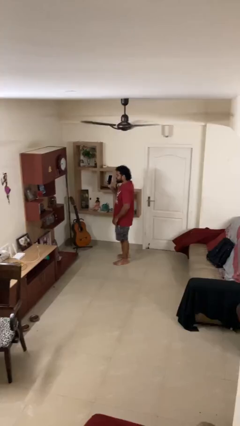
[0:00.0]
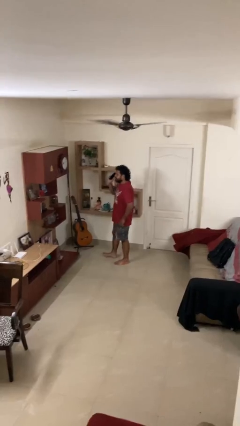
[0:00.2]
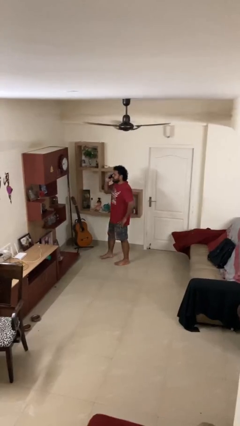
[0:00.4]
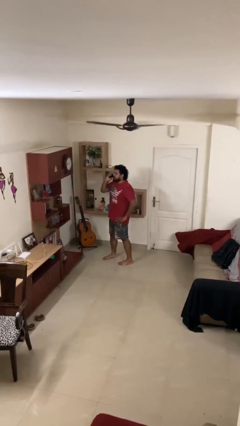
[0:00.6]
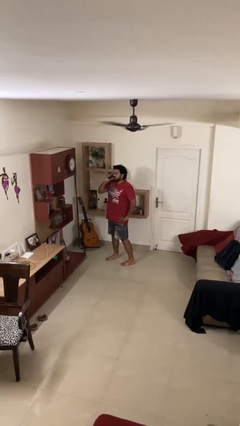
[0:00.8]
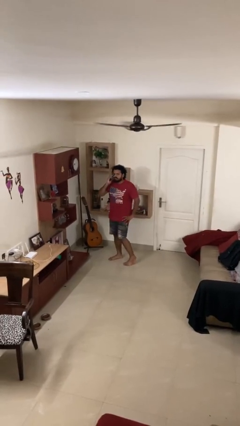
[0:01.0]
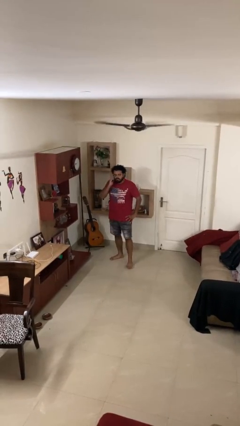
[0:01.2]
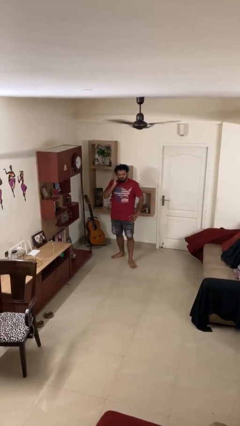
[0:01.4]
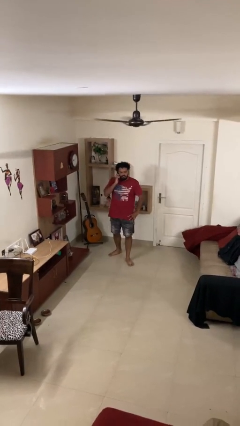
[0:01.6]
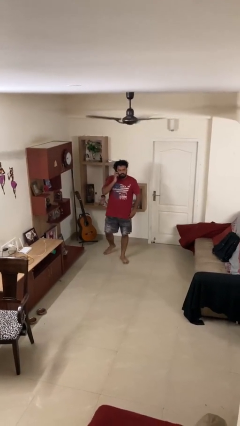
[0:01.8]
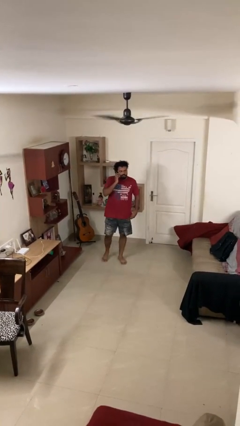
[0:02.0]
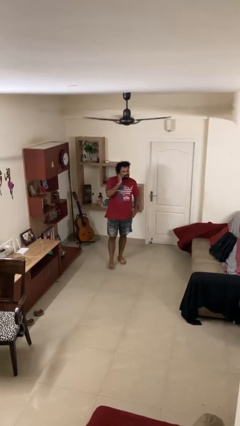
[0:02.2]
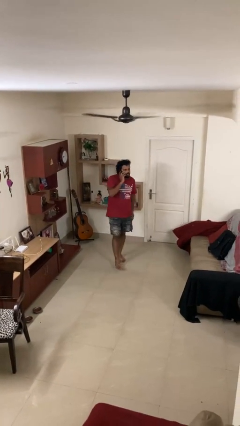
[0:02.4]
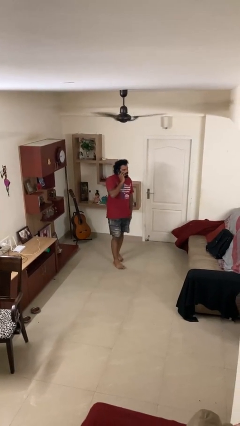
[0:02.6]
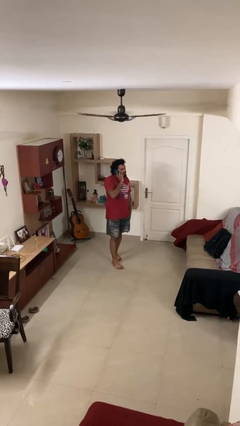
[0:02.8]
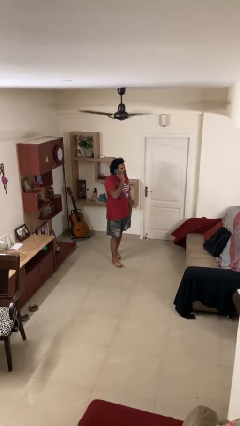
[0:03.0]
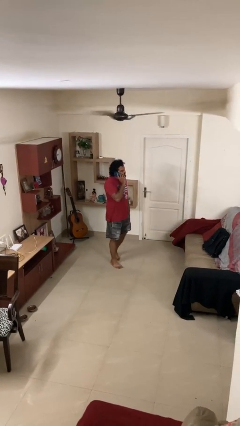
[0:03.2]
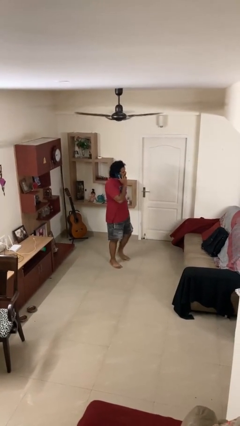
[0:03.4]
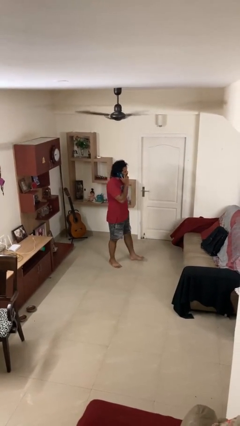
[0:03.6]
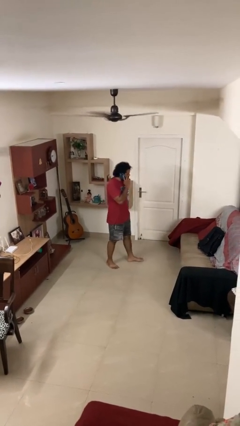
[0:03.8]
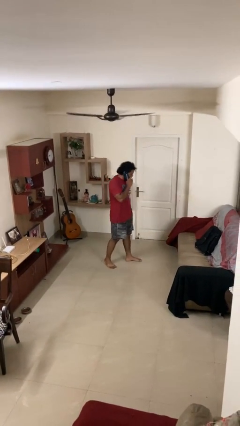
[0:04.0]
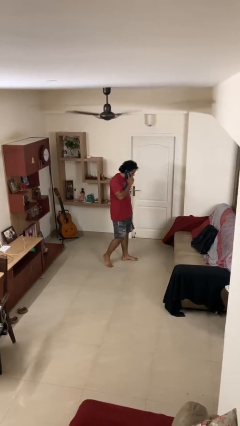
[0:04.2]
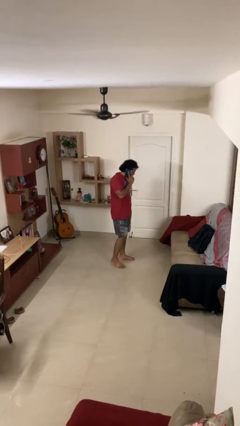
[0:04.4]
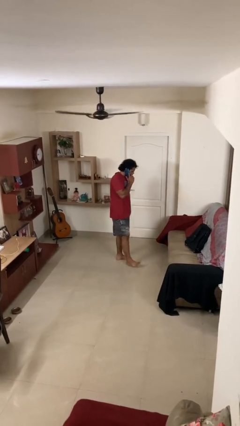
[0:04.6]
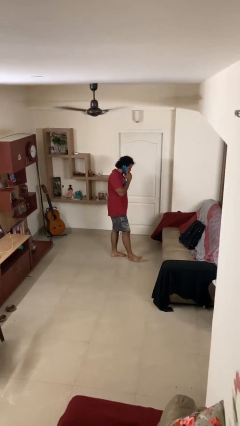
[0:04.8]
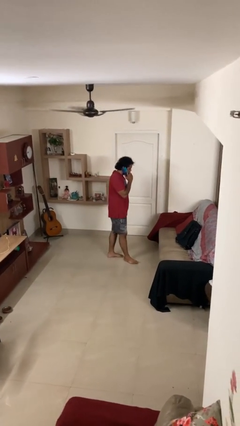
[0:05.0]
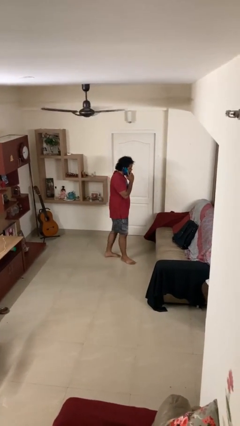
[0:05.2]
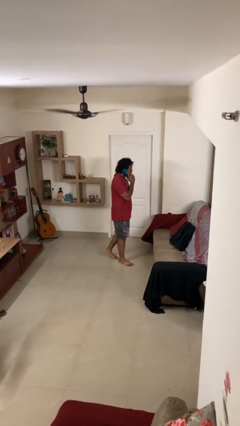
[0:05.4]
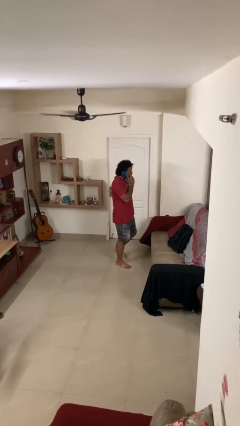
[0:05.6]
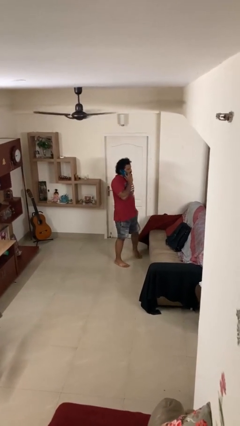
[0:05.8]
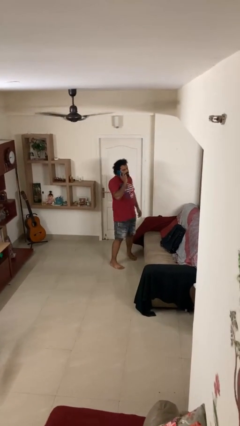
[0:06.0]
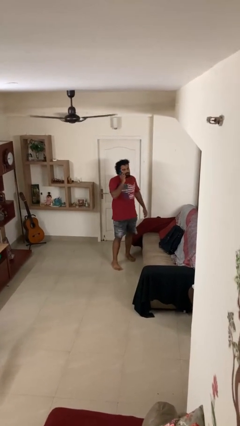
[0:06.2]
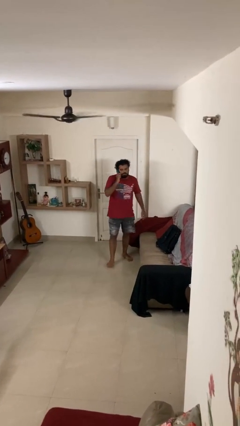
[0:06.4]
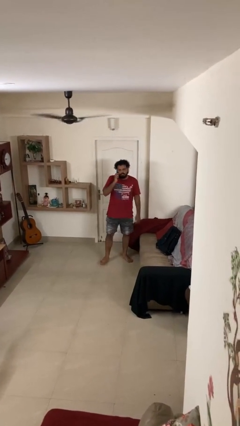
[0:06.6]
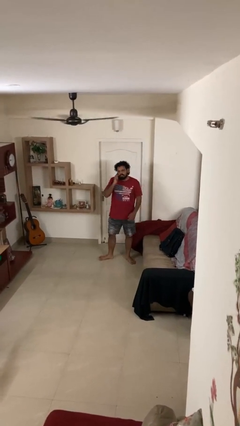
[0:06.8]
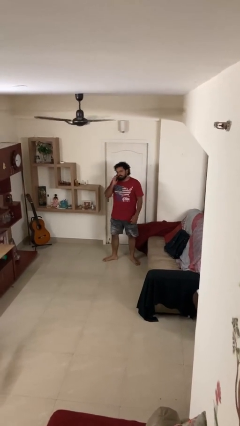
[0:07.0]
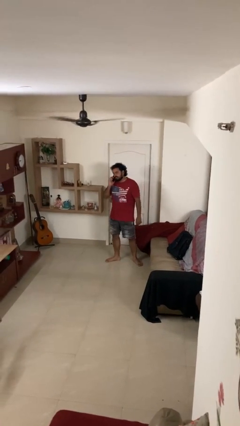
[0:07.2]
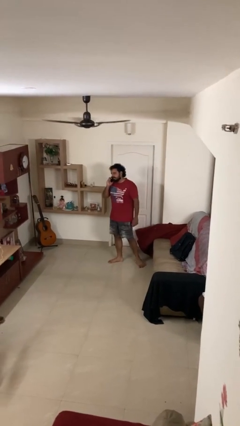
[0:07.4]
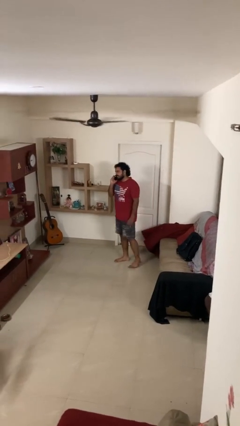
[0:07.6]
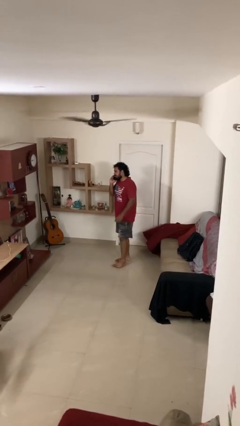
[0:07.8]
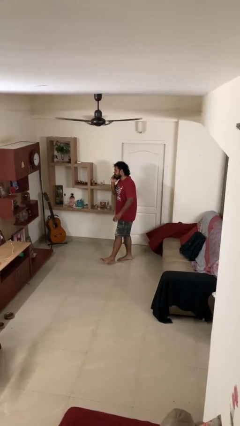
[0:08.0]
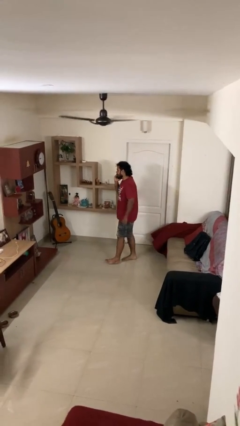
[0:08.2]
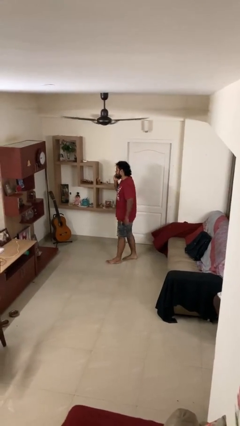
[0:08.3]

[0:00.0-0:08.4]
person talks on phone

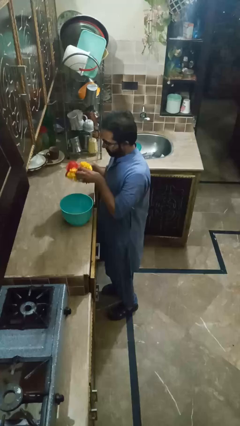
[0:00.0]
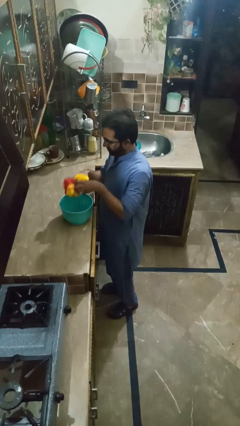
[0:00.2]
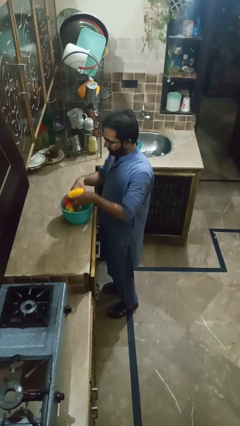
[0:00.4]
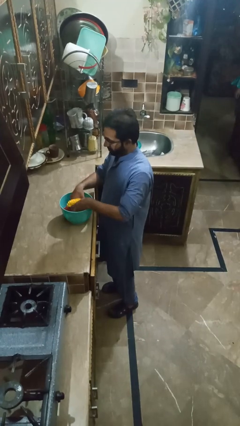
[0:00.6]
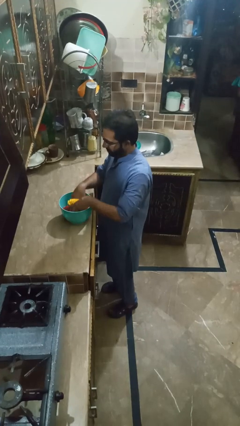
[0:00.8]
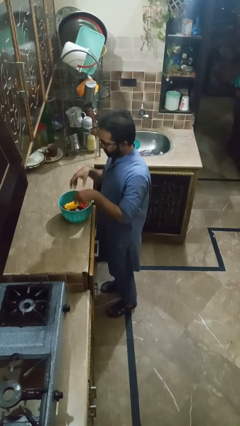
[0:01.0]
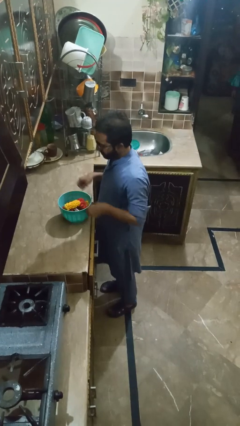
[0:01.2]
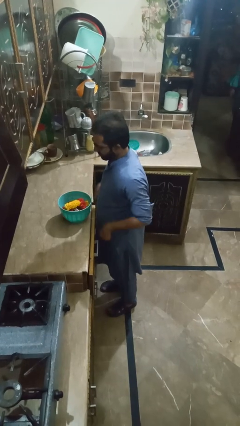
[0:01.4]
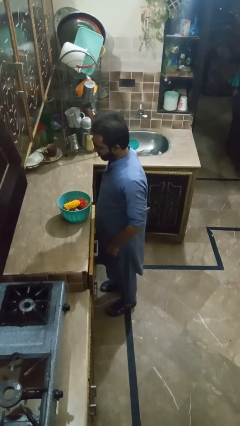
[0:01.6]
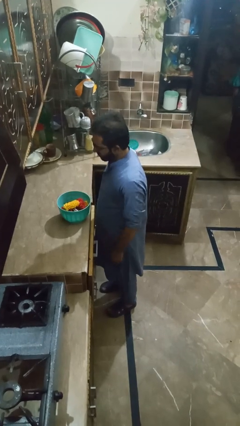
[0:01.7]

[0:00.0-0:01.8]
person pours into bowl

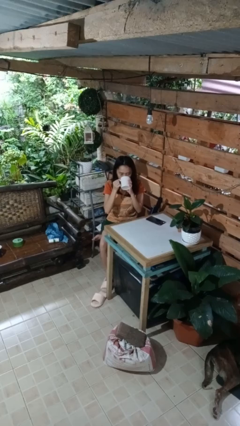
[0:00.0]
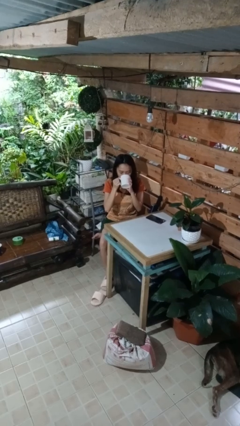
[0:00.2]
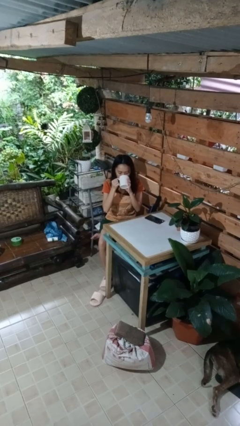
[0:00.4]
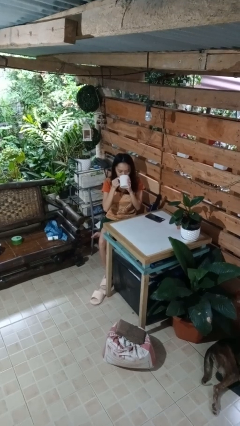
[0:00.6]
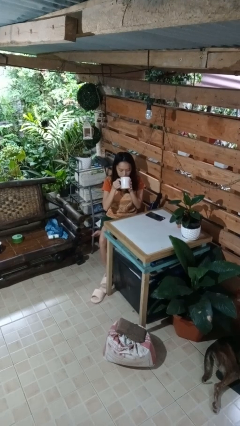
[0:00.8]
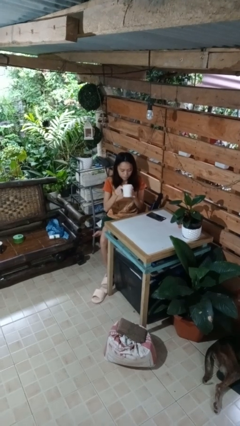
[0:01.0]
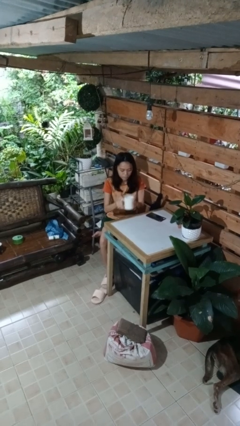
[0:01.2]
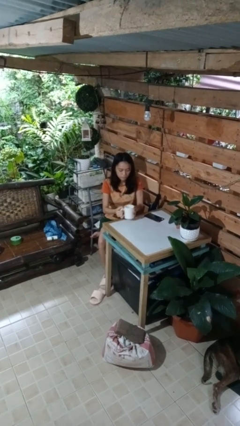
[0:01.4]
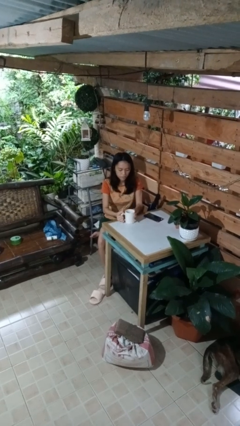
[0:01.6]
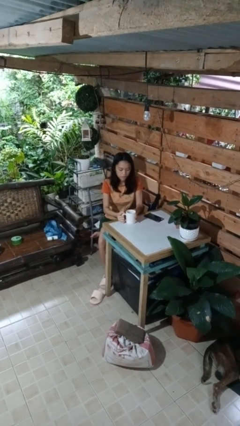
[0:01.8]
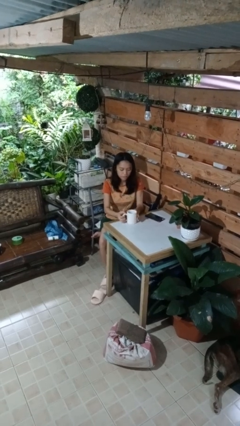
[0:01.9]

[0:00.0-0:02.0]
person puts down object on table

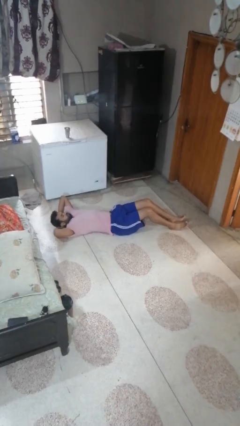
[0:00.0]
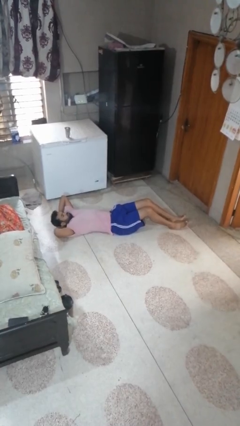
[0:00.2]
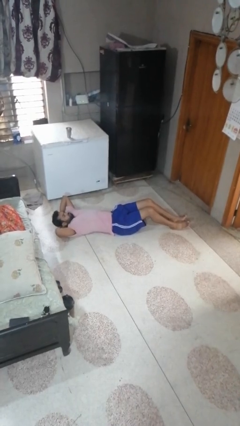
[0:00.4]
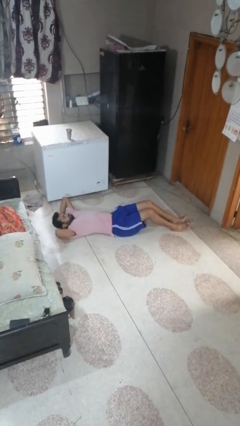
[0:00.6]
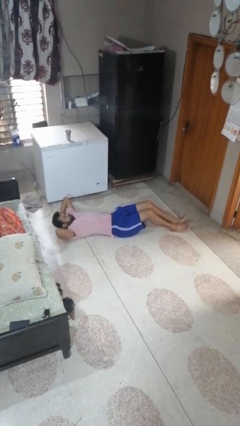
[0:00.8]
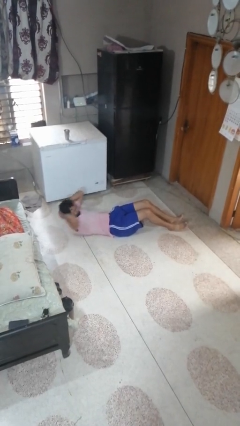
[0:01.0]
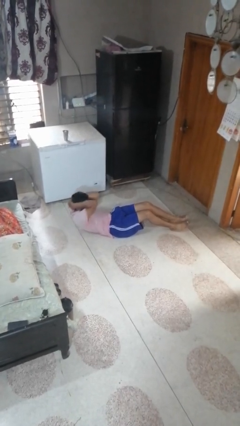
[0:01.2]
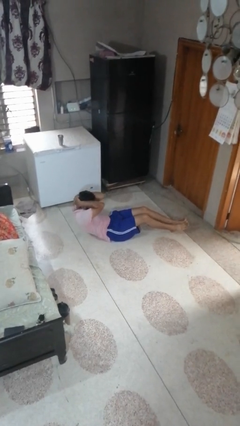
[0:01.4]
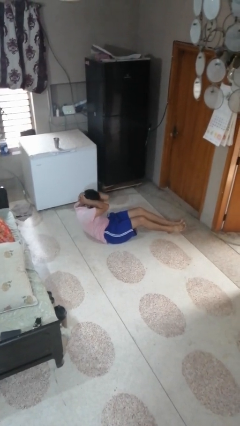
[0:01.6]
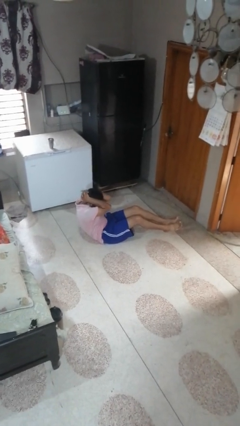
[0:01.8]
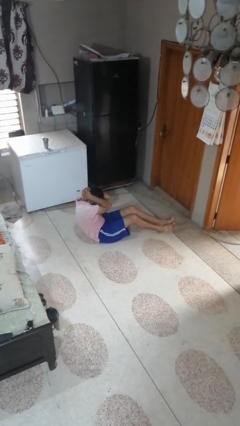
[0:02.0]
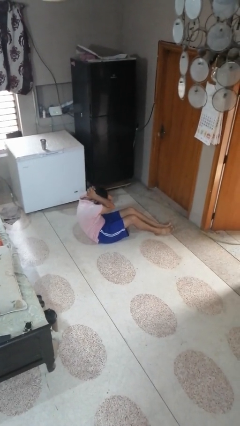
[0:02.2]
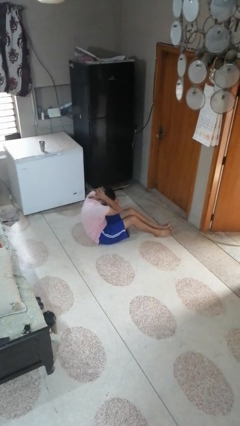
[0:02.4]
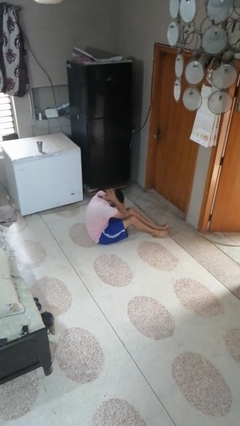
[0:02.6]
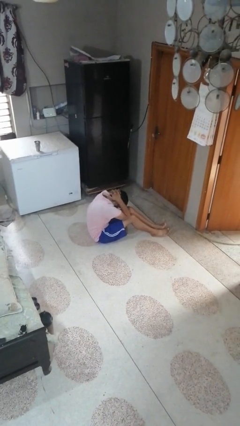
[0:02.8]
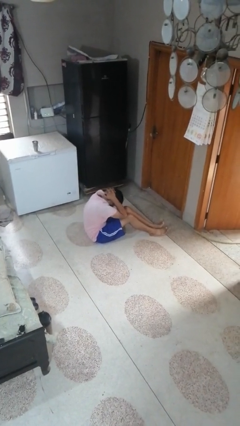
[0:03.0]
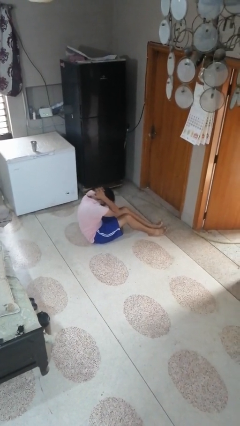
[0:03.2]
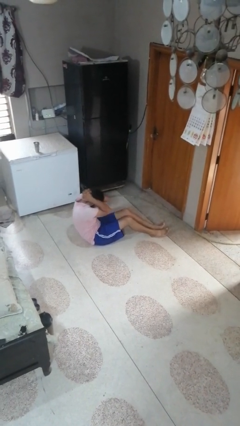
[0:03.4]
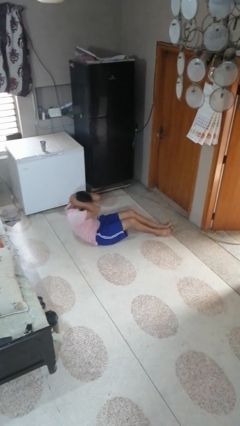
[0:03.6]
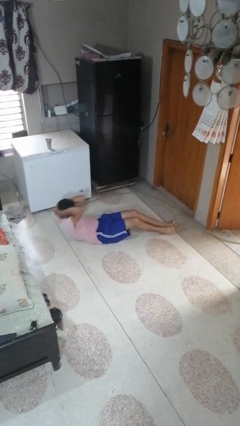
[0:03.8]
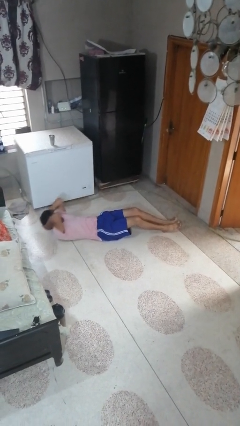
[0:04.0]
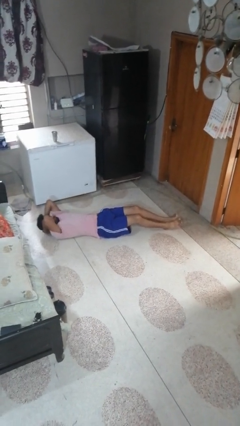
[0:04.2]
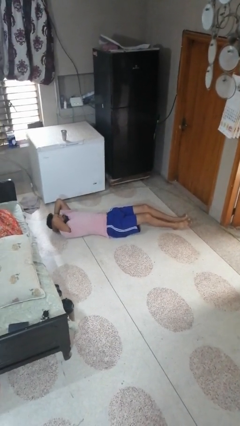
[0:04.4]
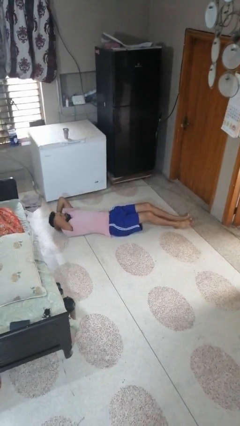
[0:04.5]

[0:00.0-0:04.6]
person exercises with situp

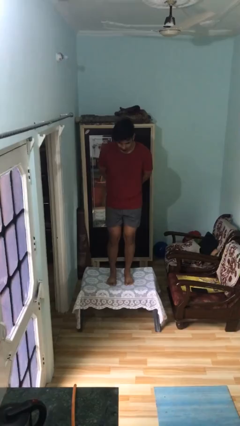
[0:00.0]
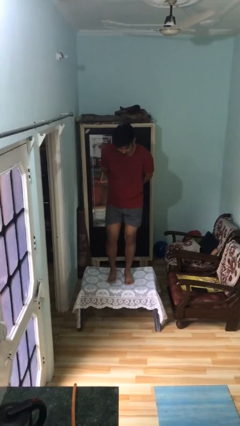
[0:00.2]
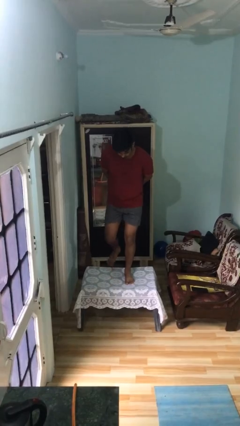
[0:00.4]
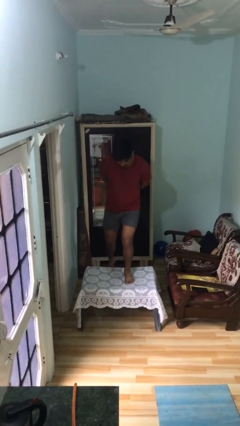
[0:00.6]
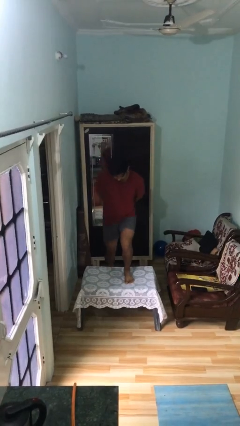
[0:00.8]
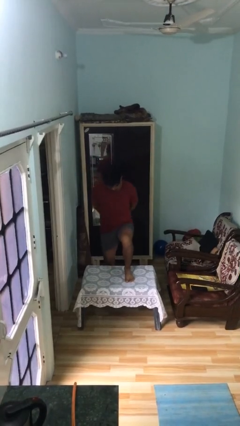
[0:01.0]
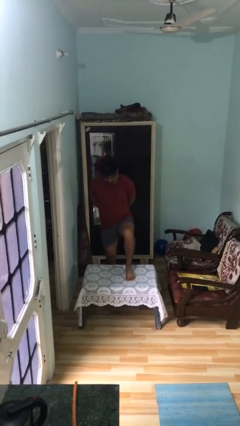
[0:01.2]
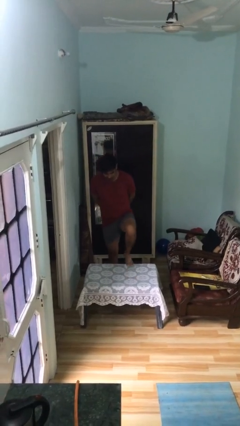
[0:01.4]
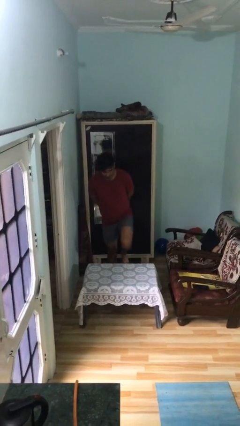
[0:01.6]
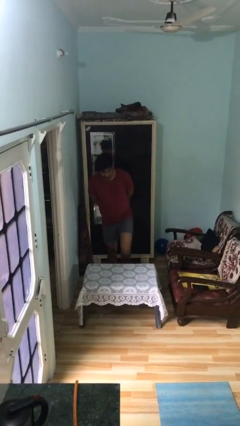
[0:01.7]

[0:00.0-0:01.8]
person climbs off table
